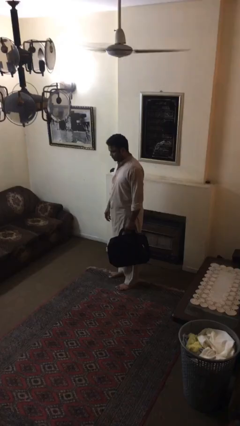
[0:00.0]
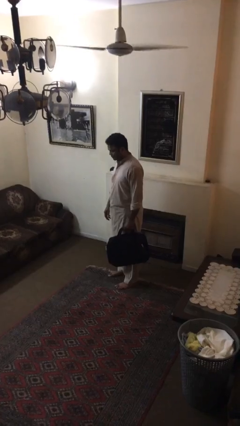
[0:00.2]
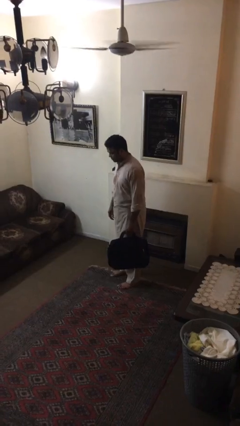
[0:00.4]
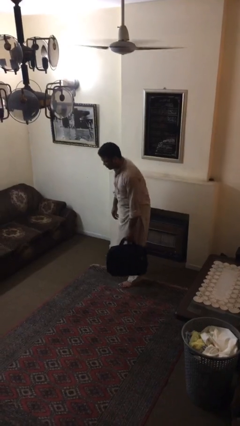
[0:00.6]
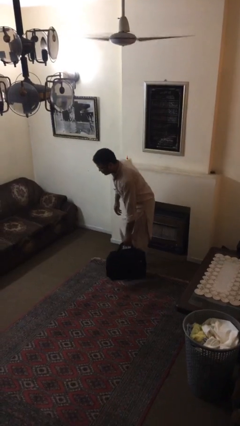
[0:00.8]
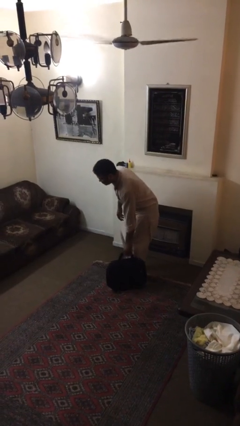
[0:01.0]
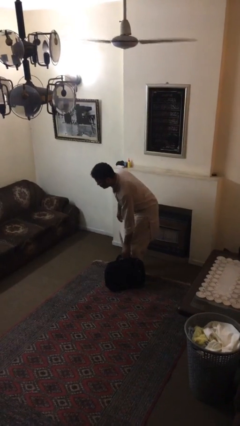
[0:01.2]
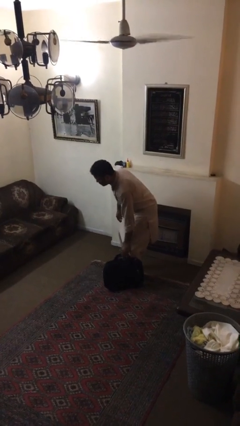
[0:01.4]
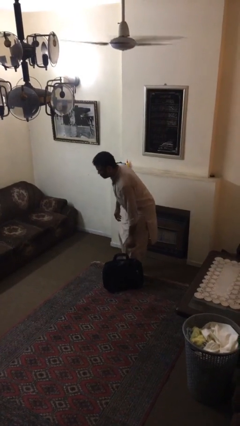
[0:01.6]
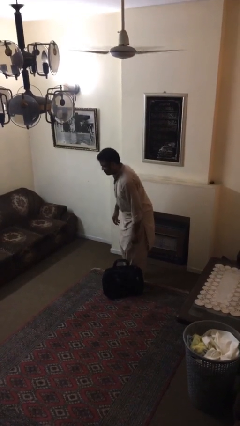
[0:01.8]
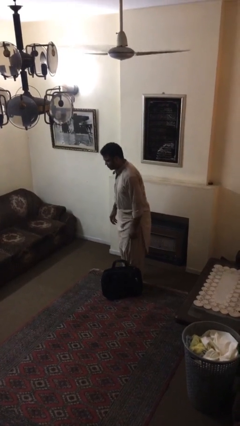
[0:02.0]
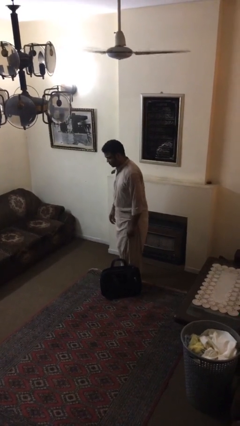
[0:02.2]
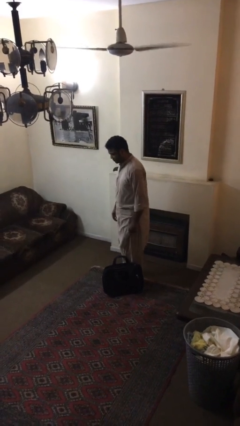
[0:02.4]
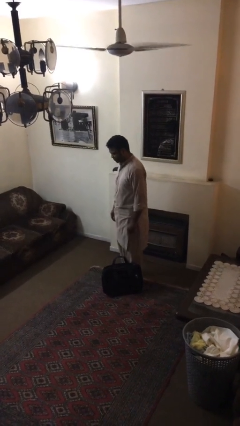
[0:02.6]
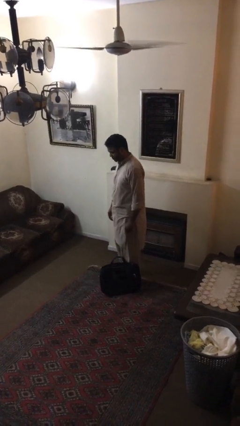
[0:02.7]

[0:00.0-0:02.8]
person puts down object on floor

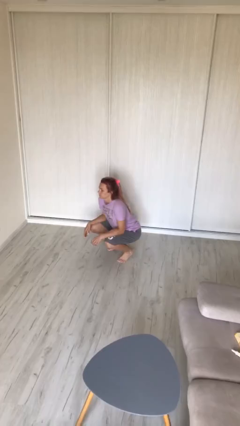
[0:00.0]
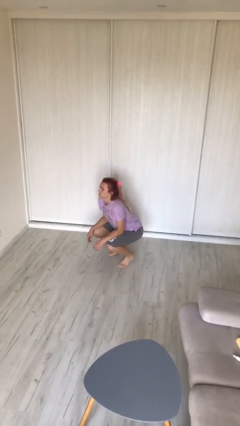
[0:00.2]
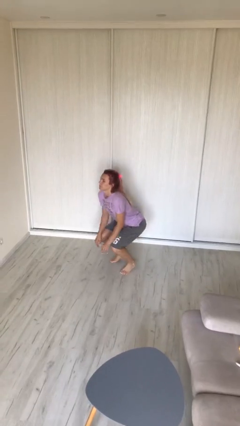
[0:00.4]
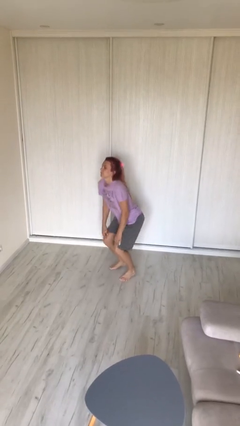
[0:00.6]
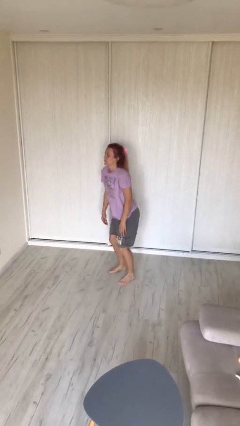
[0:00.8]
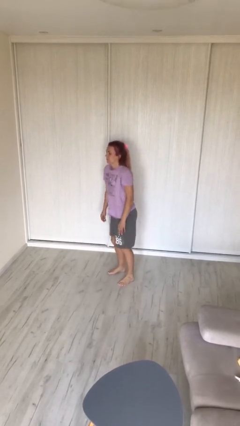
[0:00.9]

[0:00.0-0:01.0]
person stands up

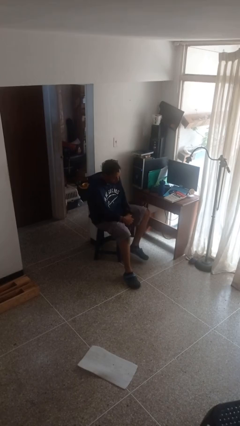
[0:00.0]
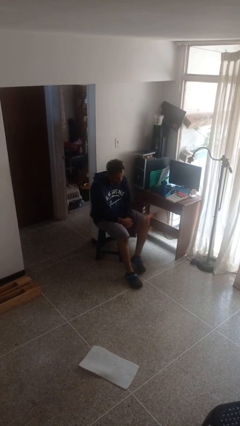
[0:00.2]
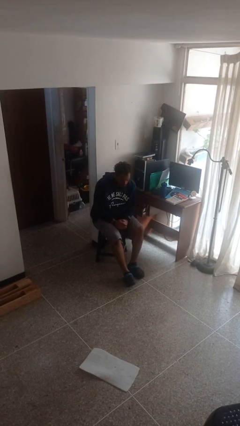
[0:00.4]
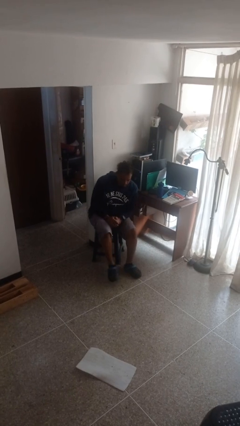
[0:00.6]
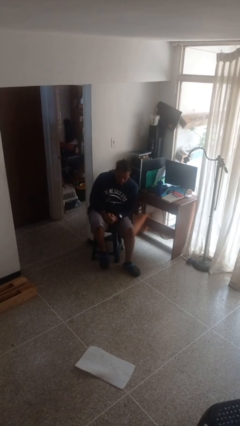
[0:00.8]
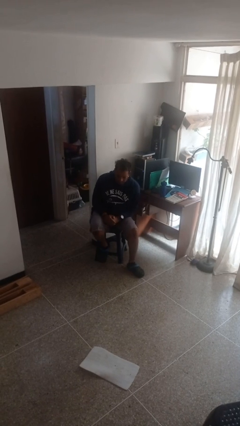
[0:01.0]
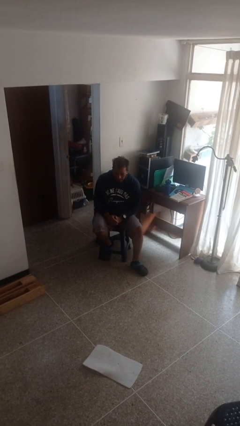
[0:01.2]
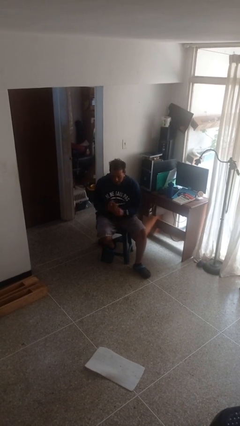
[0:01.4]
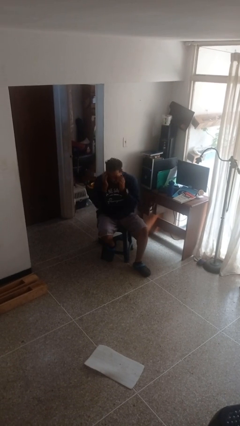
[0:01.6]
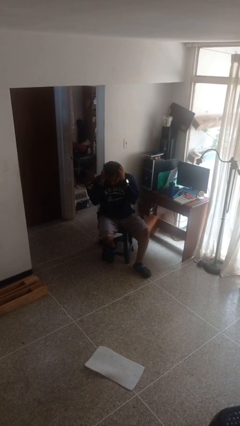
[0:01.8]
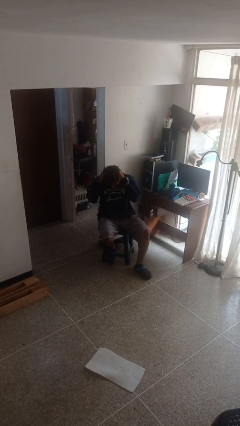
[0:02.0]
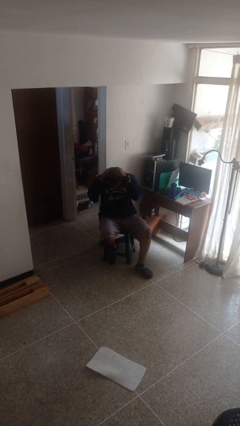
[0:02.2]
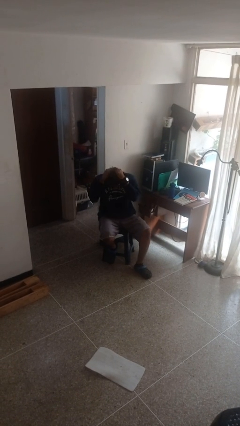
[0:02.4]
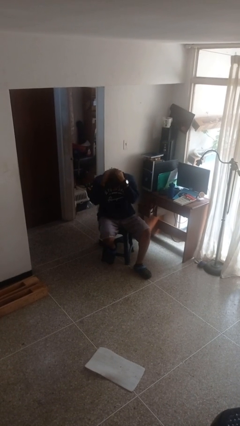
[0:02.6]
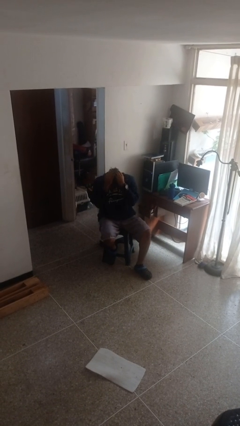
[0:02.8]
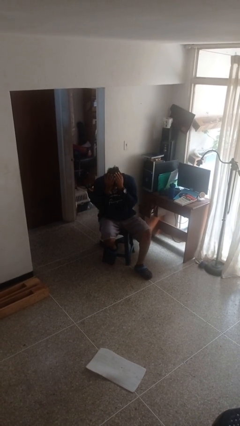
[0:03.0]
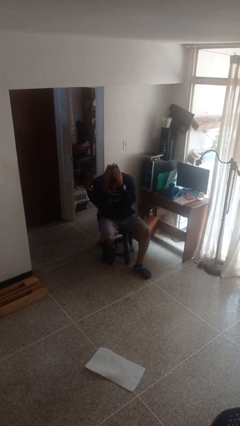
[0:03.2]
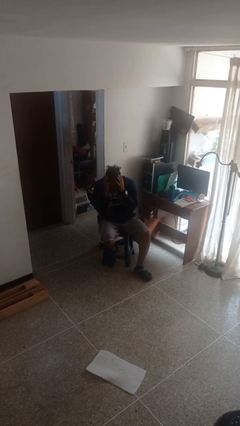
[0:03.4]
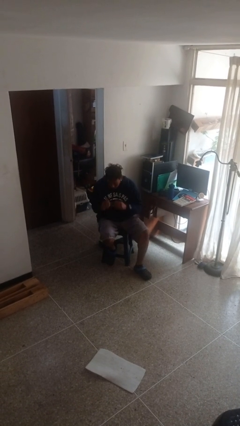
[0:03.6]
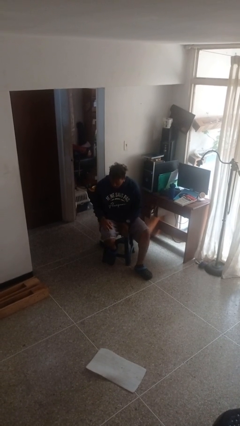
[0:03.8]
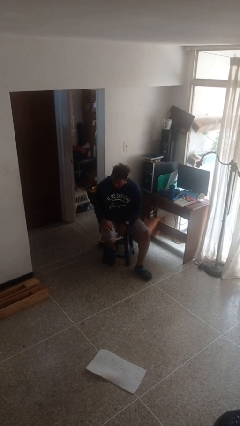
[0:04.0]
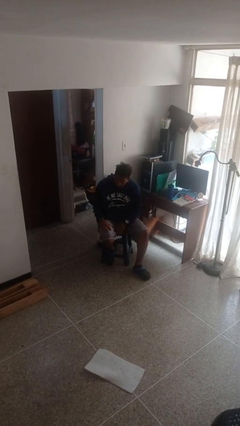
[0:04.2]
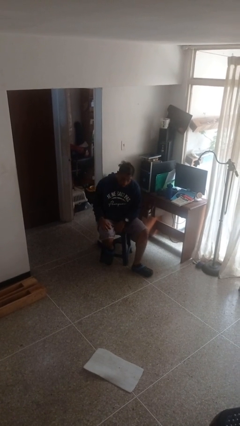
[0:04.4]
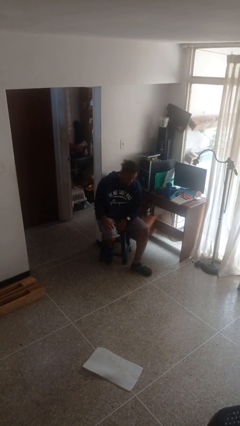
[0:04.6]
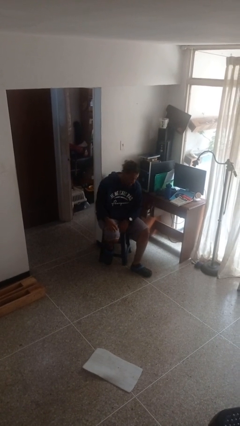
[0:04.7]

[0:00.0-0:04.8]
person scratches face

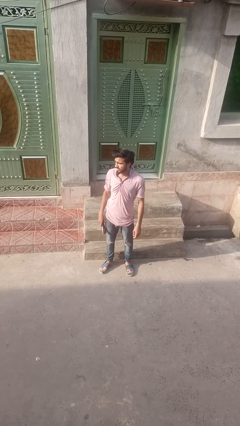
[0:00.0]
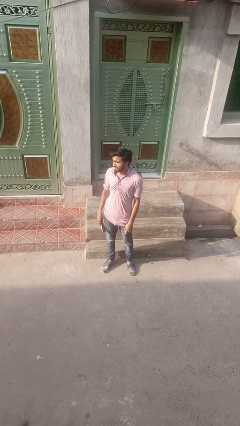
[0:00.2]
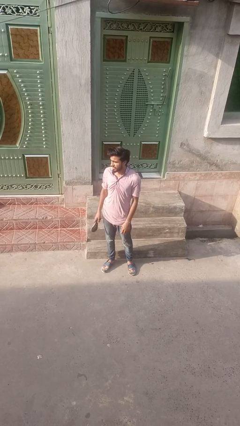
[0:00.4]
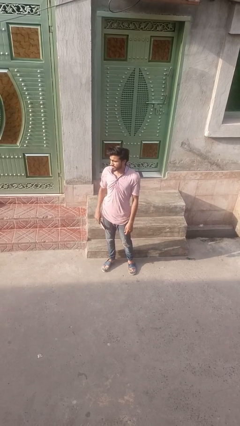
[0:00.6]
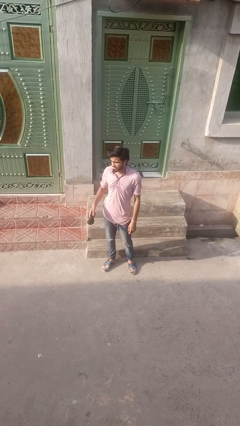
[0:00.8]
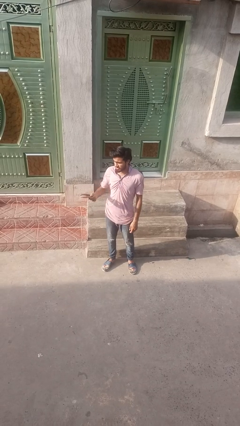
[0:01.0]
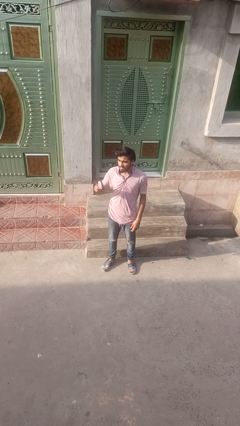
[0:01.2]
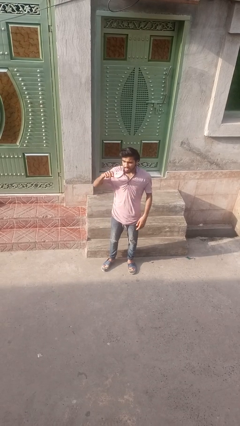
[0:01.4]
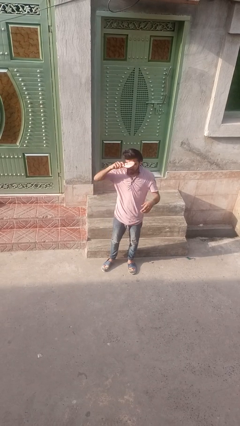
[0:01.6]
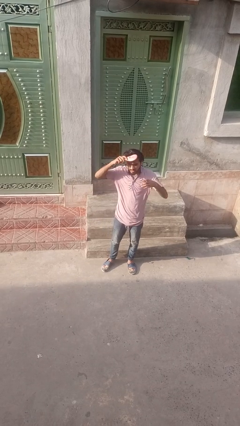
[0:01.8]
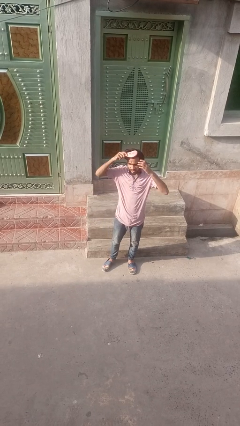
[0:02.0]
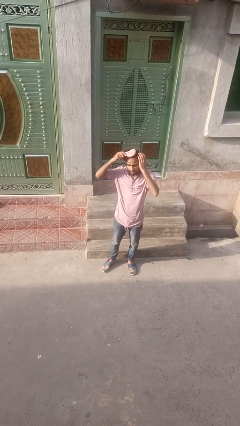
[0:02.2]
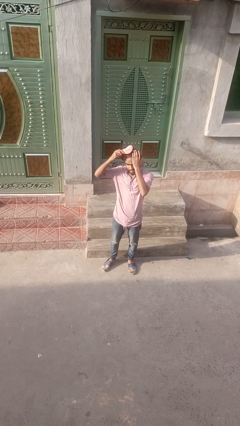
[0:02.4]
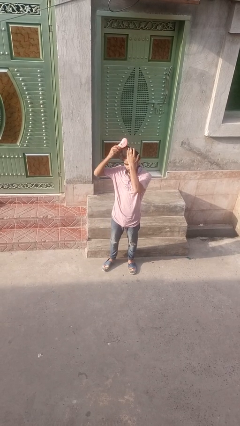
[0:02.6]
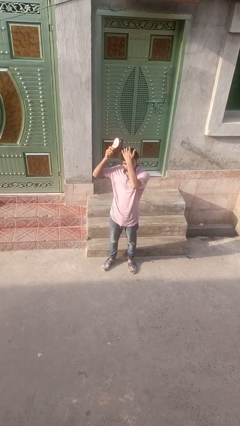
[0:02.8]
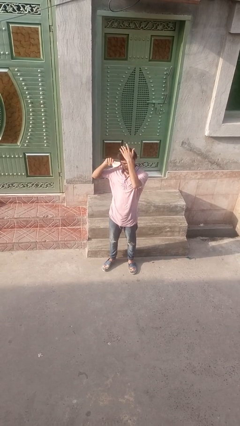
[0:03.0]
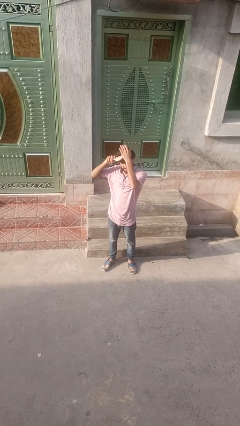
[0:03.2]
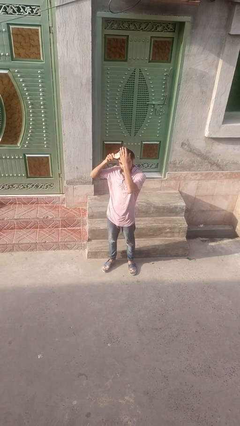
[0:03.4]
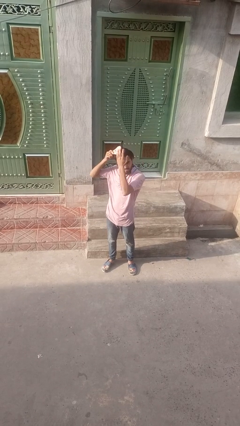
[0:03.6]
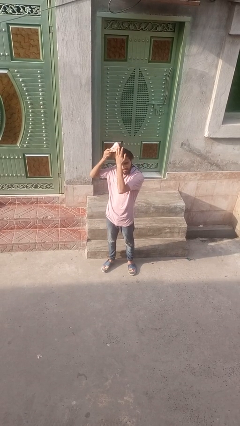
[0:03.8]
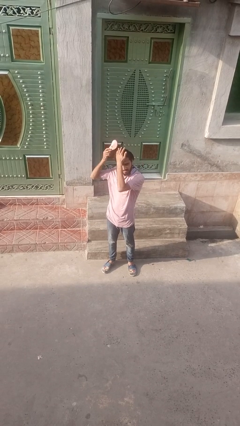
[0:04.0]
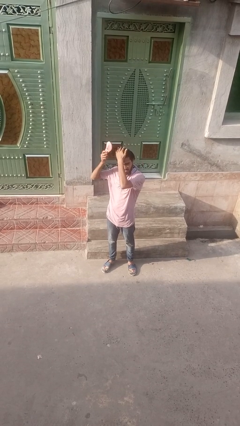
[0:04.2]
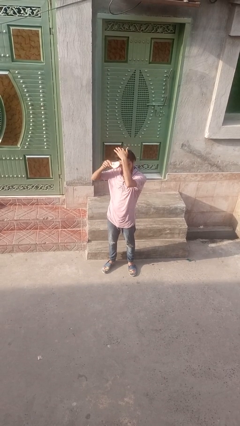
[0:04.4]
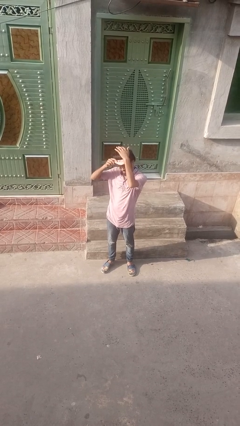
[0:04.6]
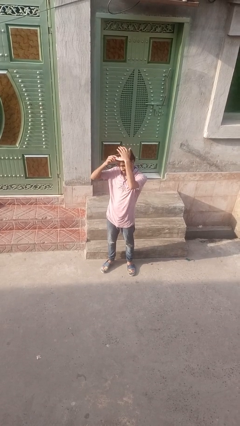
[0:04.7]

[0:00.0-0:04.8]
person brushes hair

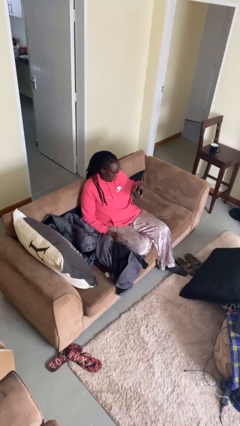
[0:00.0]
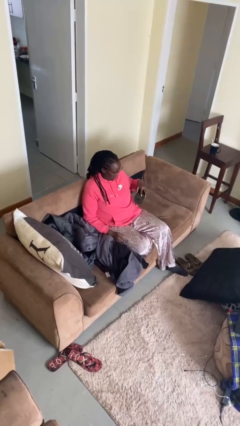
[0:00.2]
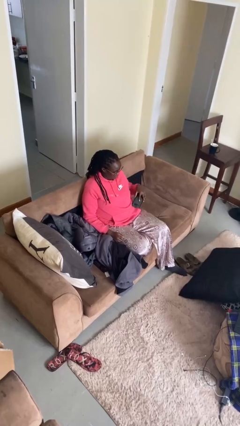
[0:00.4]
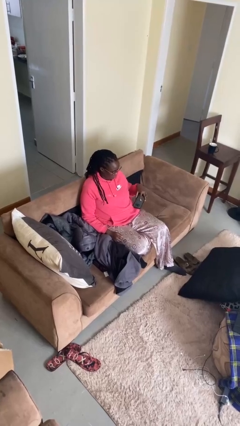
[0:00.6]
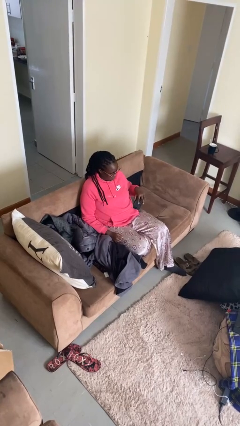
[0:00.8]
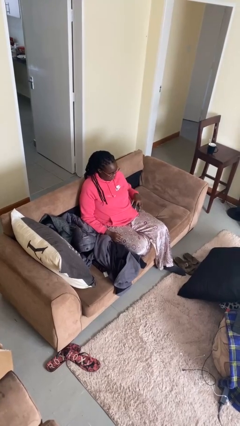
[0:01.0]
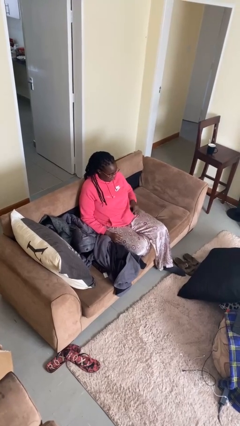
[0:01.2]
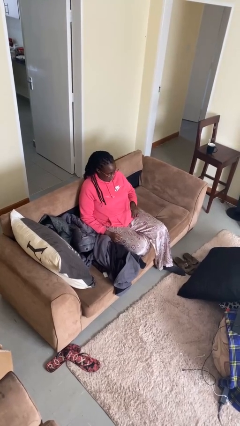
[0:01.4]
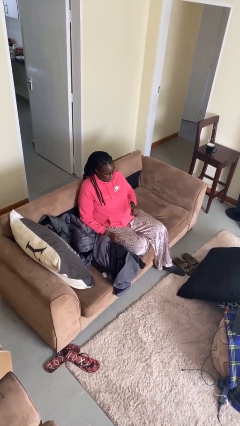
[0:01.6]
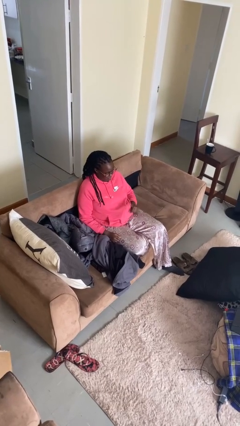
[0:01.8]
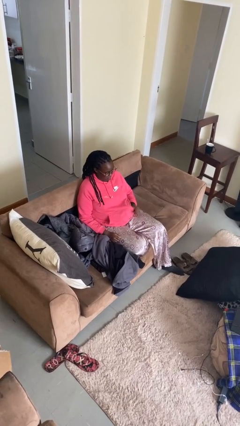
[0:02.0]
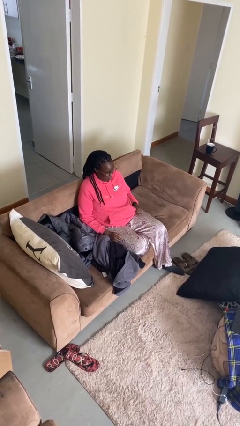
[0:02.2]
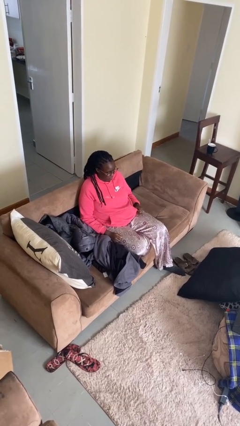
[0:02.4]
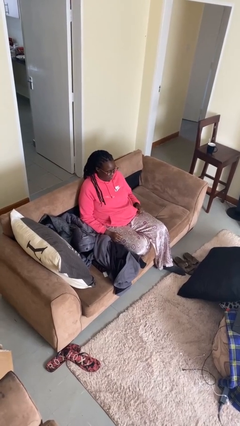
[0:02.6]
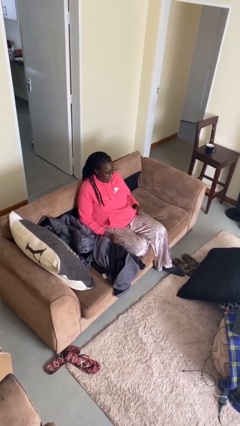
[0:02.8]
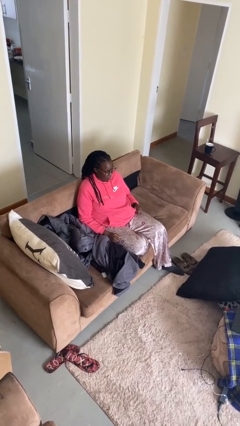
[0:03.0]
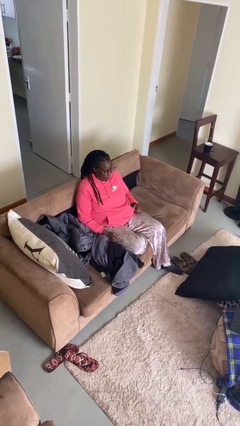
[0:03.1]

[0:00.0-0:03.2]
person puts phone into pocket

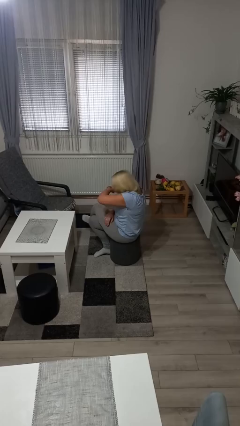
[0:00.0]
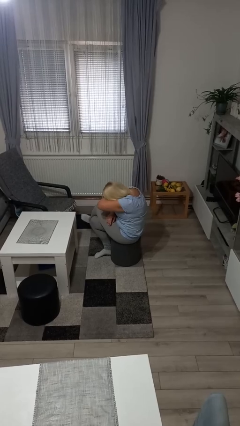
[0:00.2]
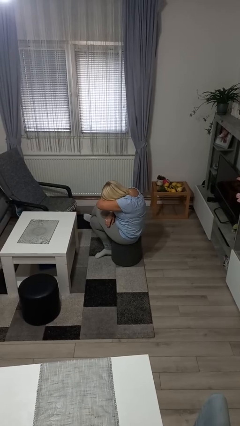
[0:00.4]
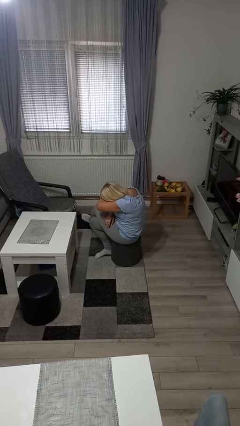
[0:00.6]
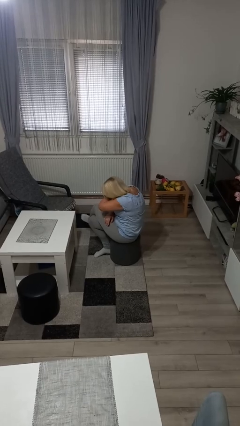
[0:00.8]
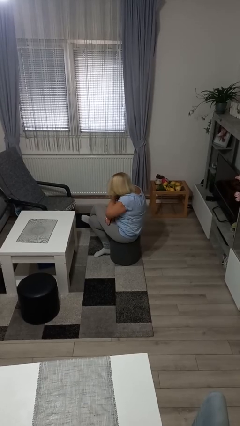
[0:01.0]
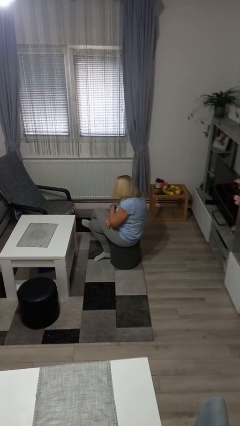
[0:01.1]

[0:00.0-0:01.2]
person sneezes into arm
